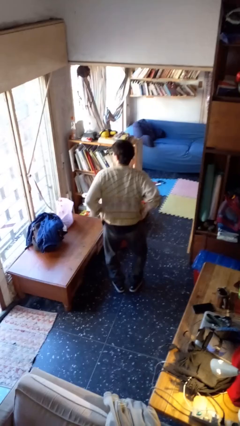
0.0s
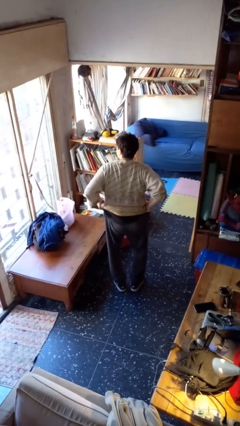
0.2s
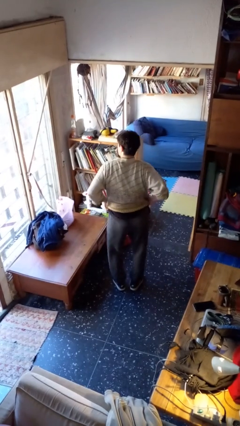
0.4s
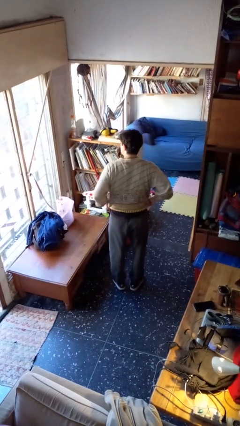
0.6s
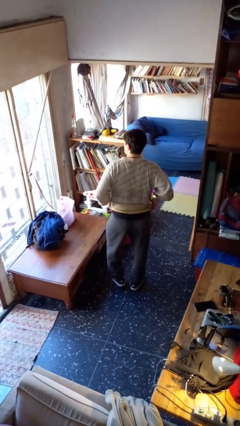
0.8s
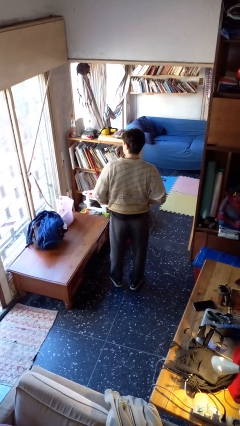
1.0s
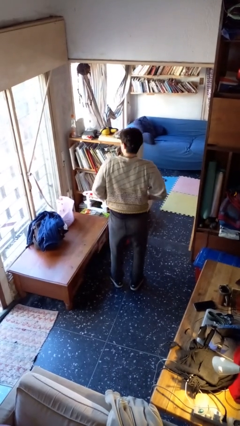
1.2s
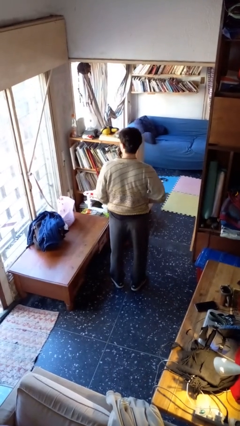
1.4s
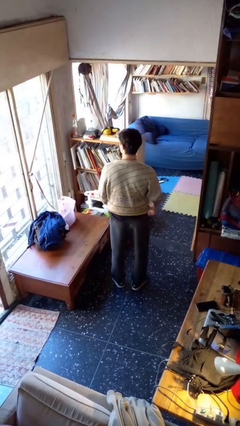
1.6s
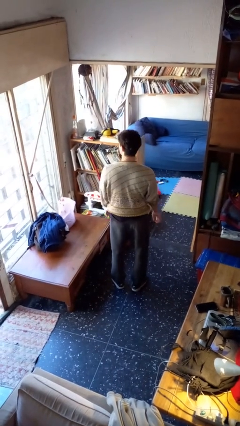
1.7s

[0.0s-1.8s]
person hikes up pants

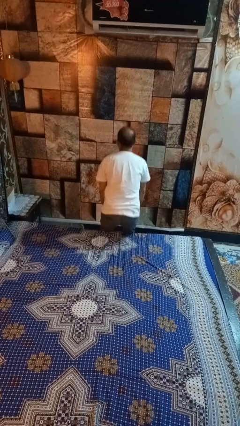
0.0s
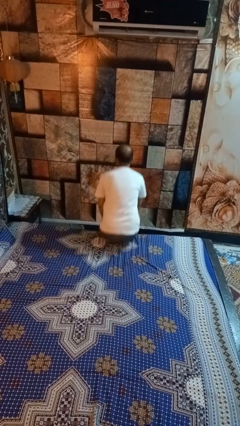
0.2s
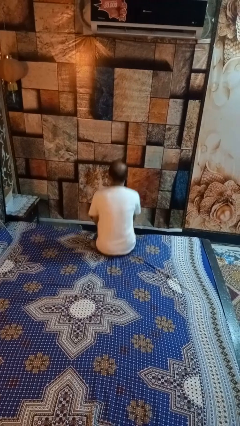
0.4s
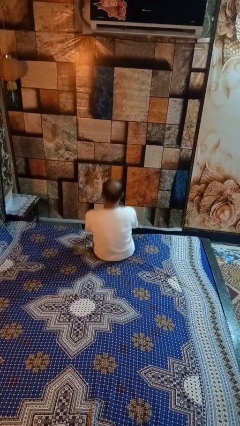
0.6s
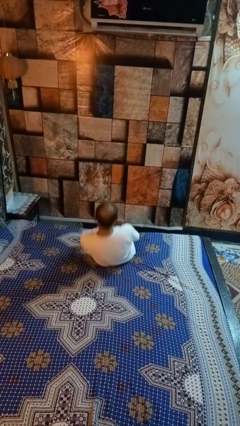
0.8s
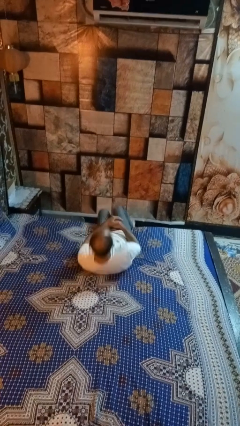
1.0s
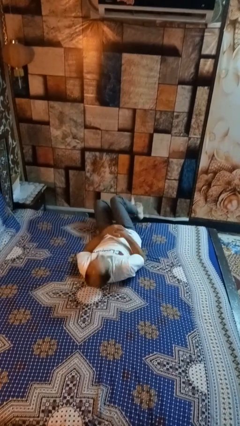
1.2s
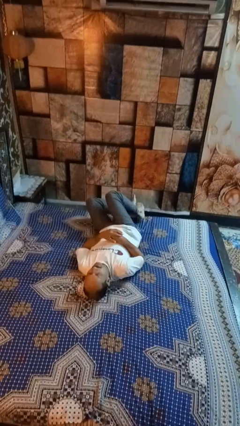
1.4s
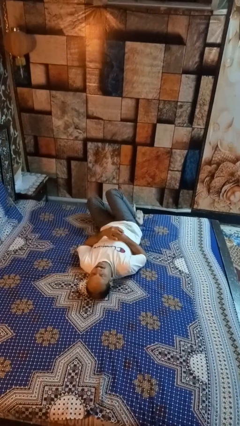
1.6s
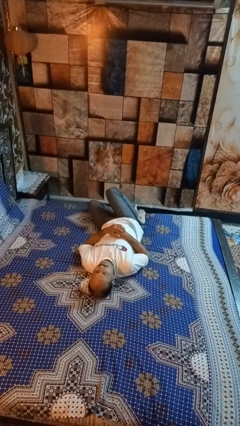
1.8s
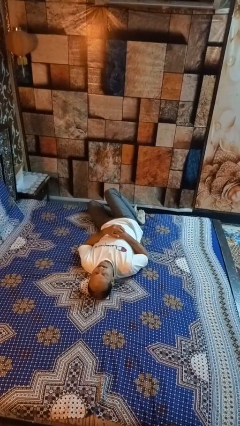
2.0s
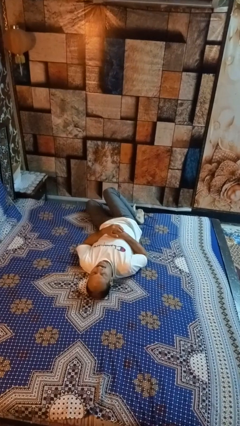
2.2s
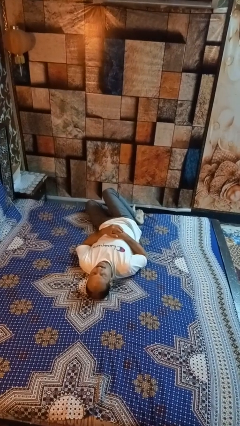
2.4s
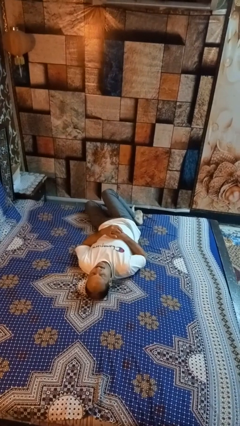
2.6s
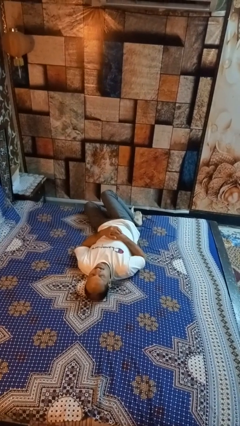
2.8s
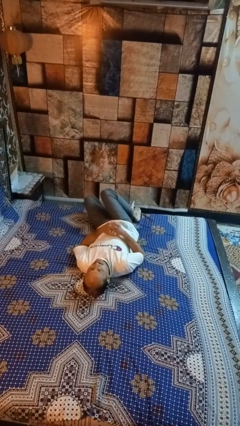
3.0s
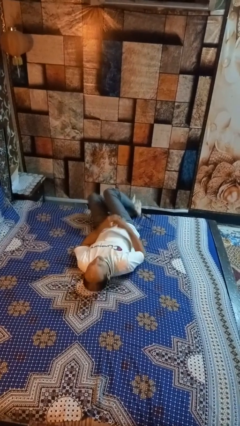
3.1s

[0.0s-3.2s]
person lies down on bed

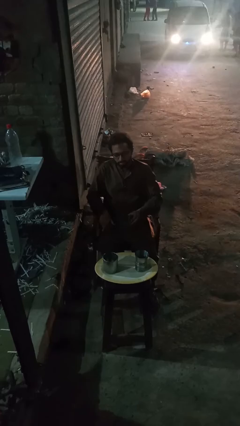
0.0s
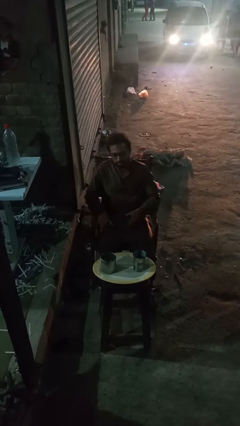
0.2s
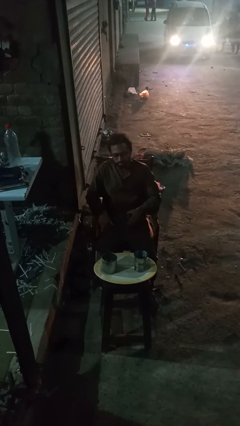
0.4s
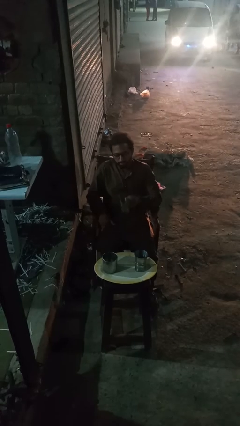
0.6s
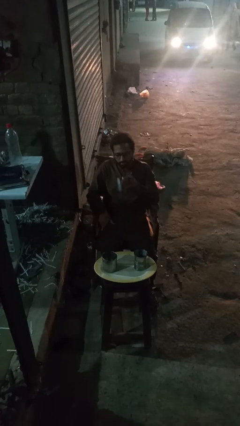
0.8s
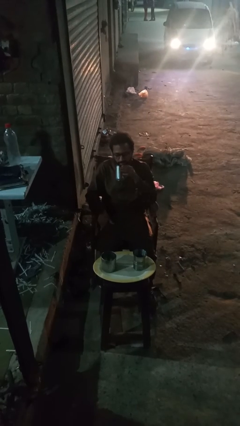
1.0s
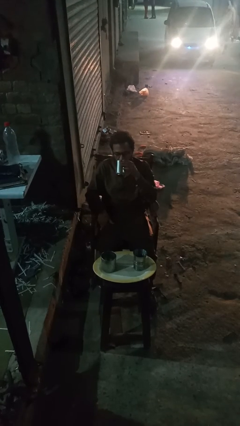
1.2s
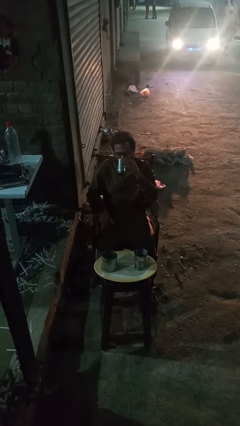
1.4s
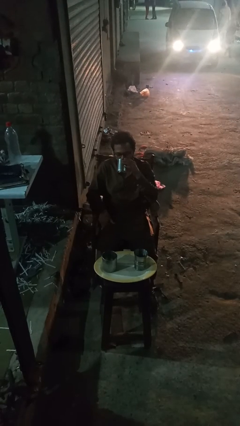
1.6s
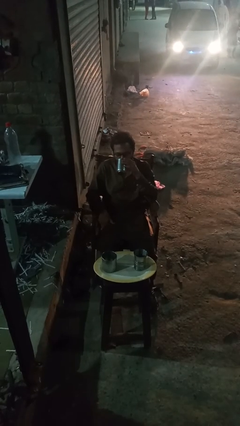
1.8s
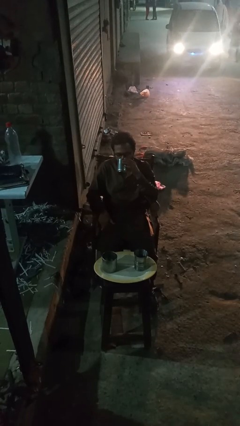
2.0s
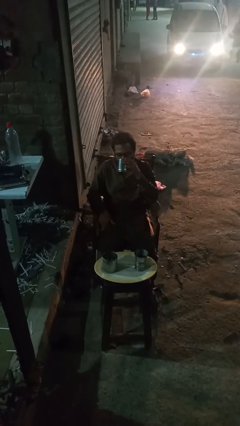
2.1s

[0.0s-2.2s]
person drinks from shotglass

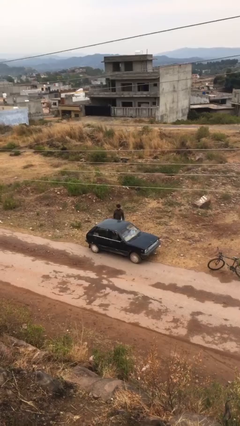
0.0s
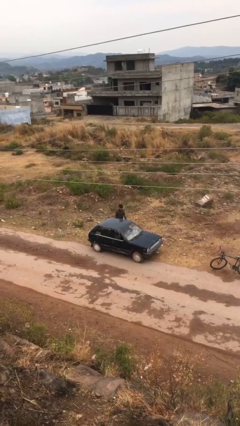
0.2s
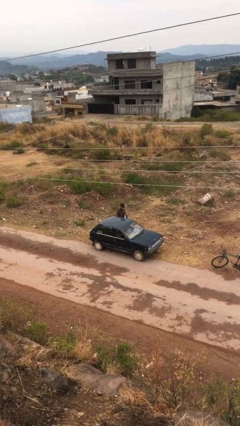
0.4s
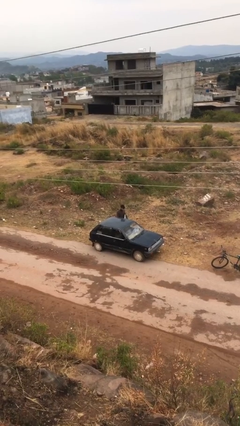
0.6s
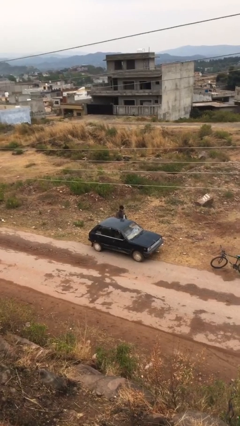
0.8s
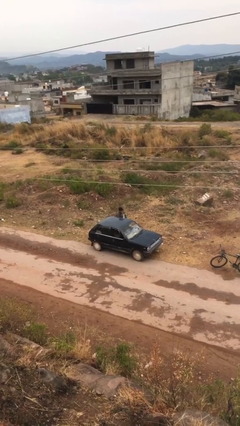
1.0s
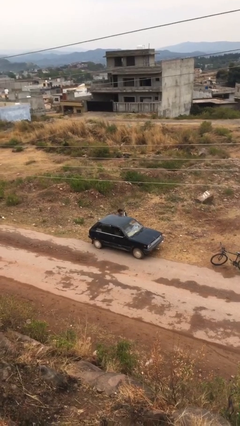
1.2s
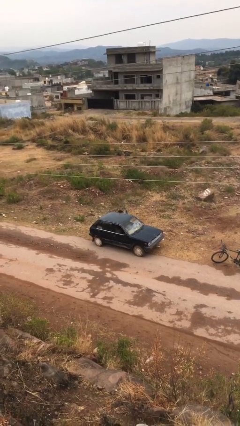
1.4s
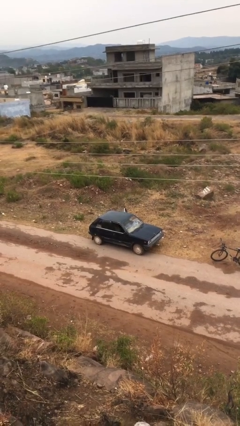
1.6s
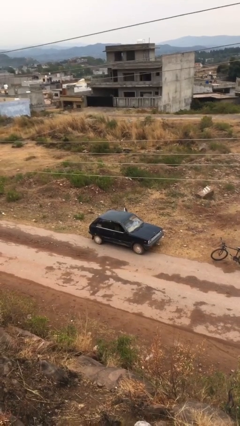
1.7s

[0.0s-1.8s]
person enters car

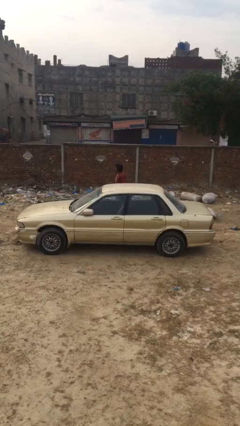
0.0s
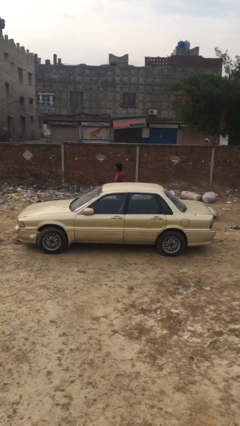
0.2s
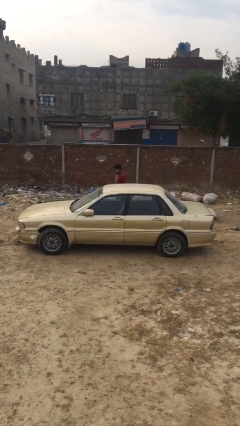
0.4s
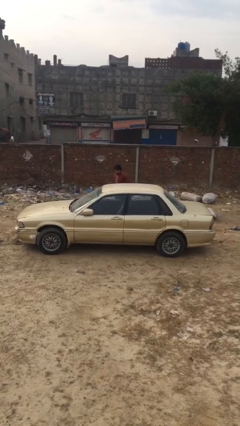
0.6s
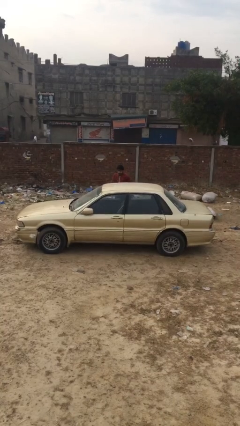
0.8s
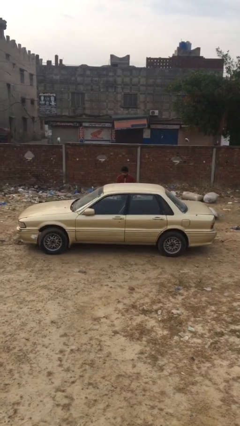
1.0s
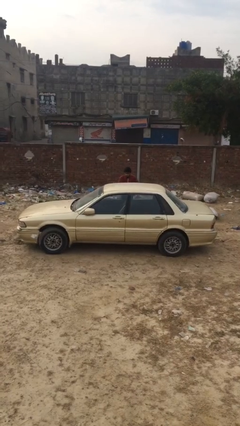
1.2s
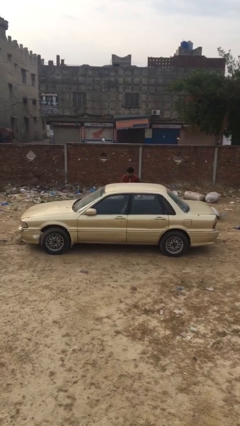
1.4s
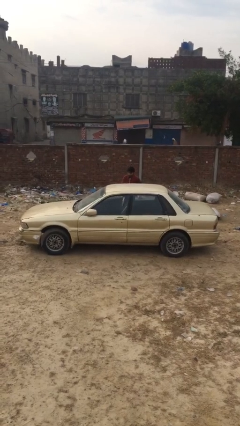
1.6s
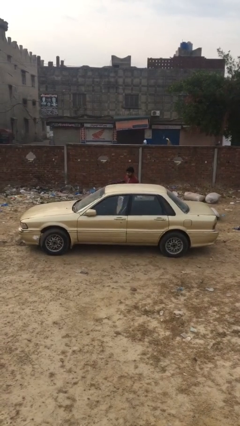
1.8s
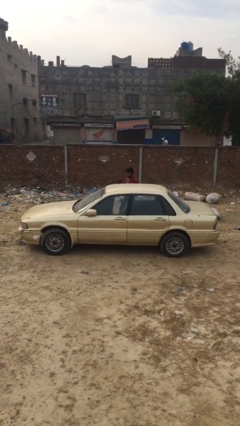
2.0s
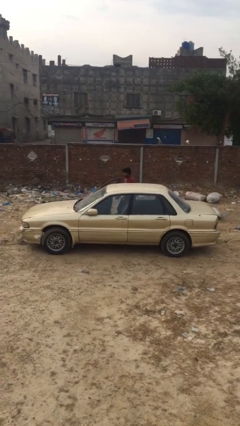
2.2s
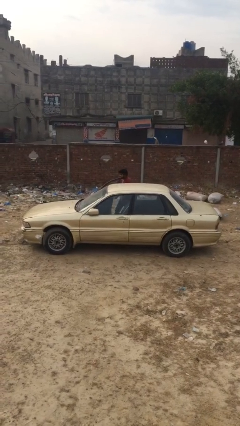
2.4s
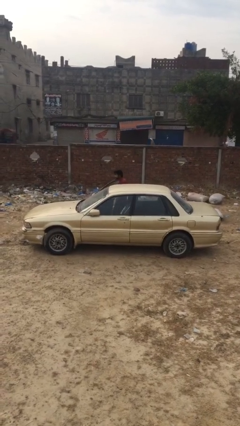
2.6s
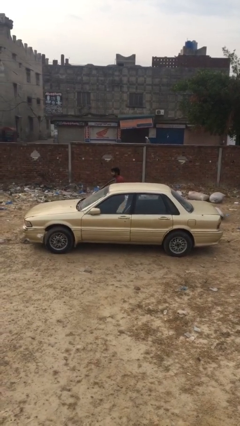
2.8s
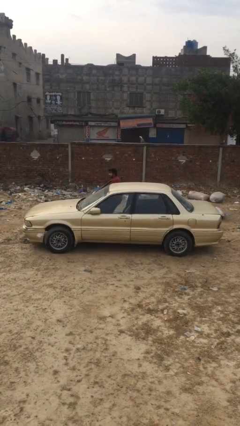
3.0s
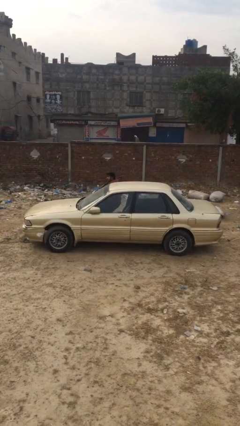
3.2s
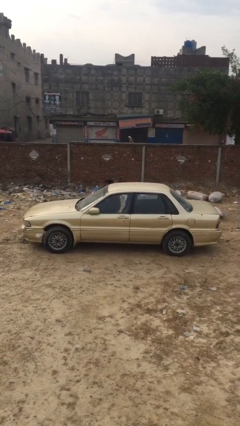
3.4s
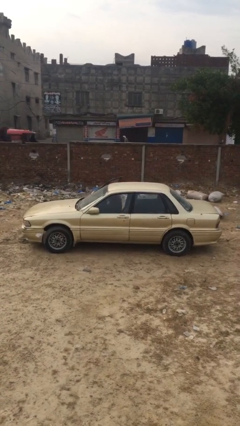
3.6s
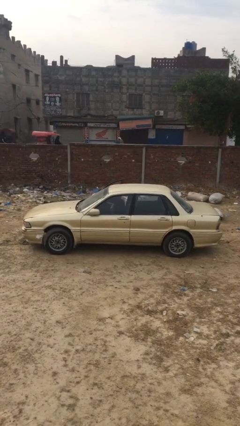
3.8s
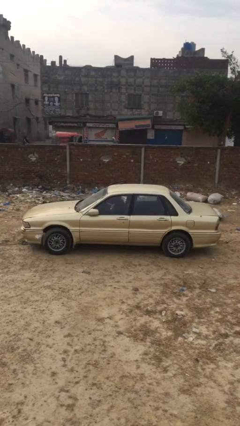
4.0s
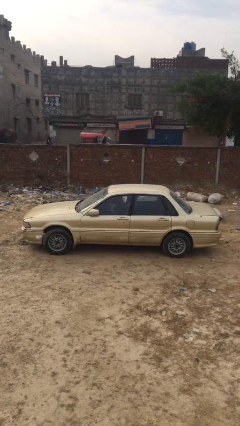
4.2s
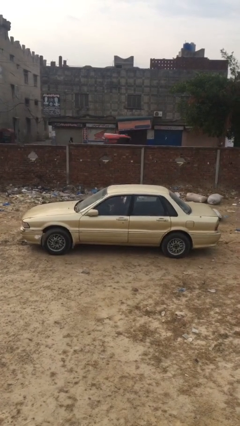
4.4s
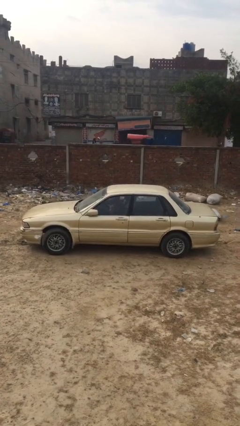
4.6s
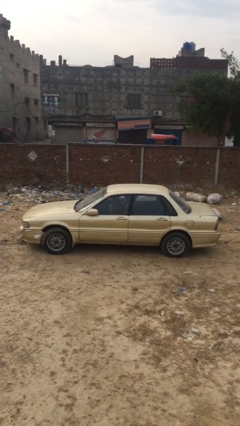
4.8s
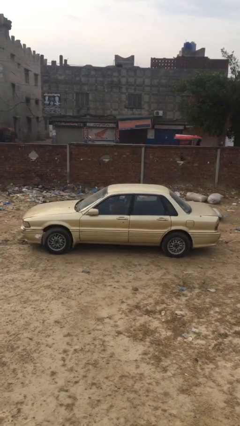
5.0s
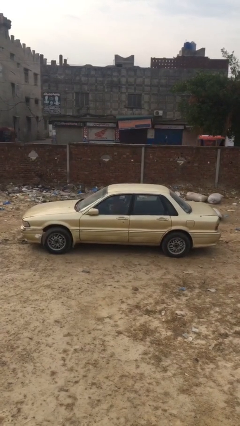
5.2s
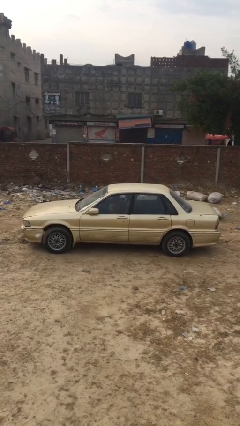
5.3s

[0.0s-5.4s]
car picks up person

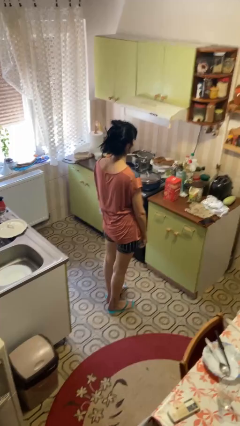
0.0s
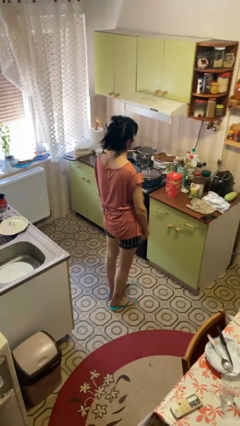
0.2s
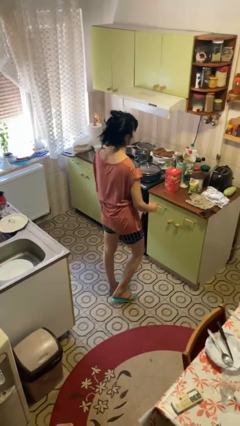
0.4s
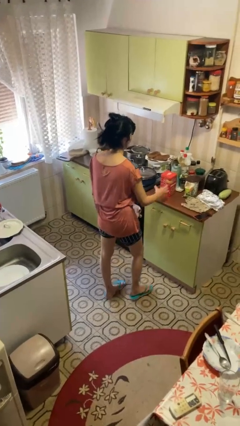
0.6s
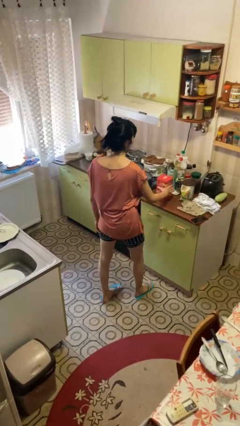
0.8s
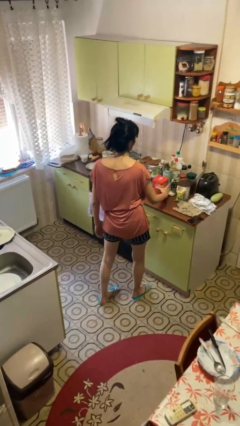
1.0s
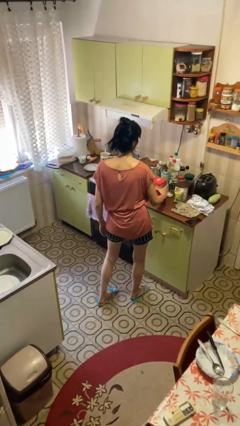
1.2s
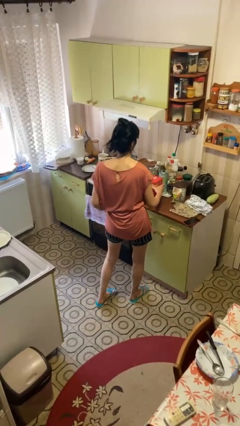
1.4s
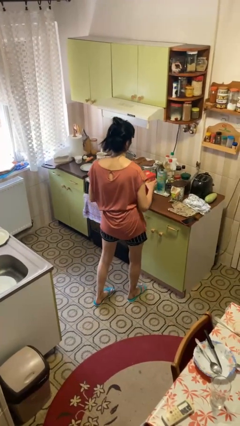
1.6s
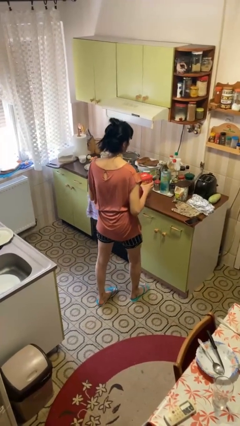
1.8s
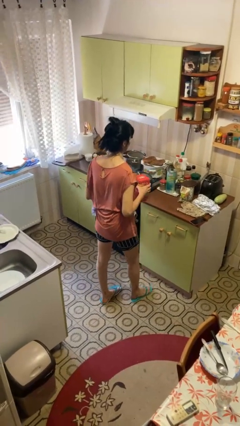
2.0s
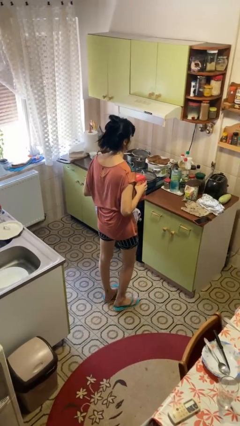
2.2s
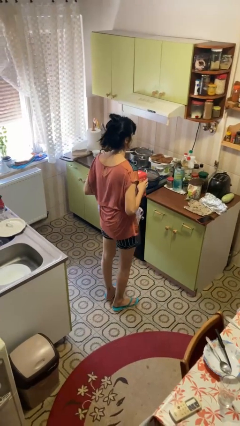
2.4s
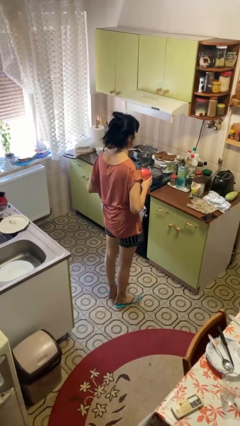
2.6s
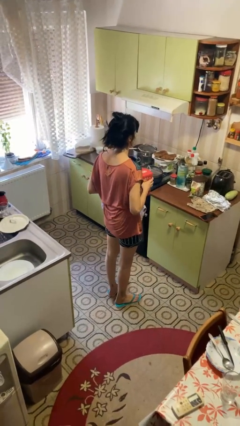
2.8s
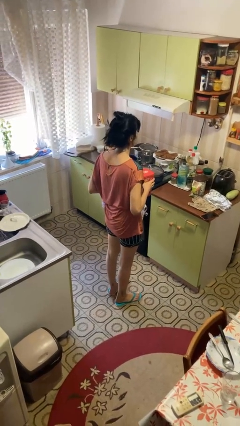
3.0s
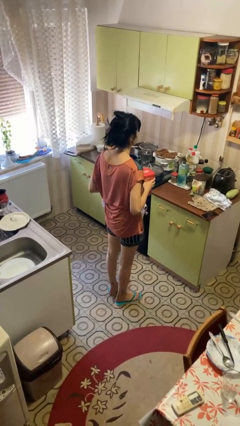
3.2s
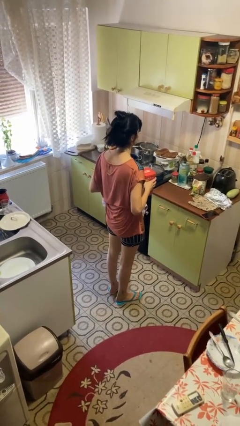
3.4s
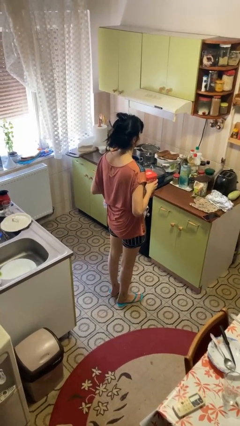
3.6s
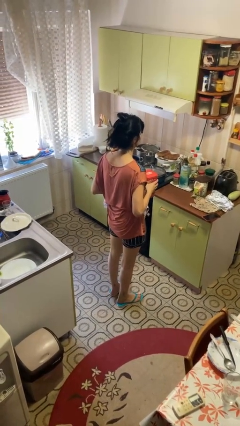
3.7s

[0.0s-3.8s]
person picks up object from countertop
